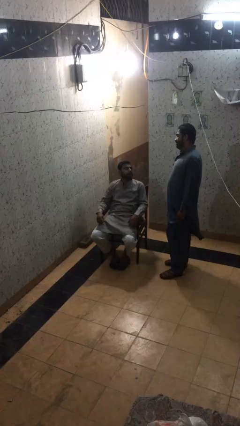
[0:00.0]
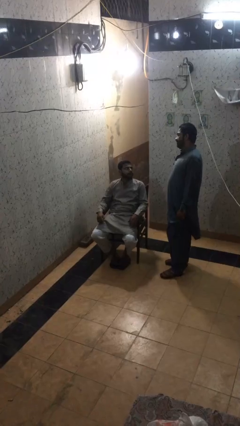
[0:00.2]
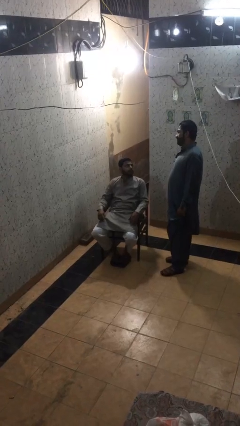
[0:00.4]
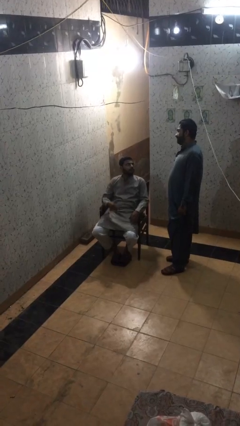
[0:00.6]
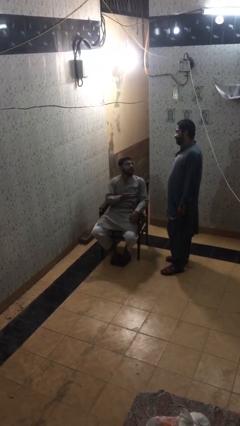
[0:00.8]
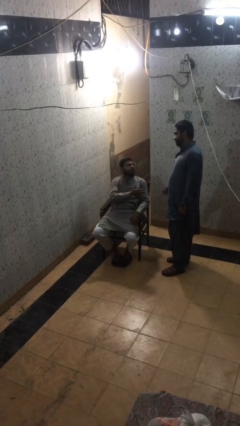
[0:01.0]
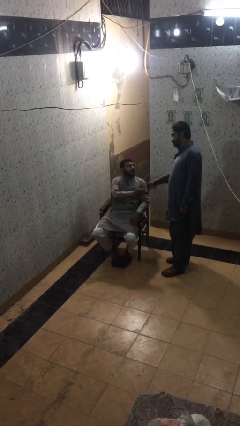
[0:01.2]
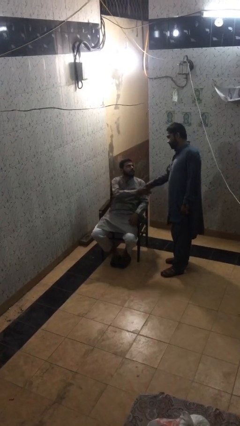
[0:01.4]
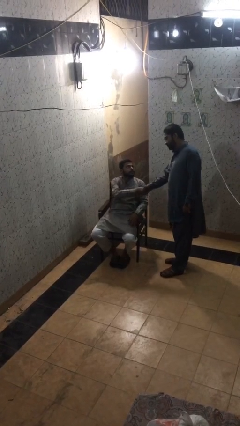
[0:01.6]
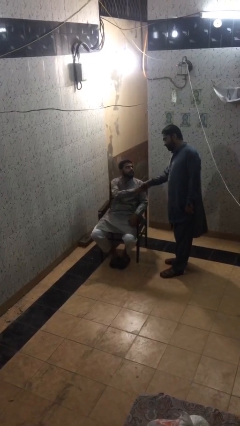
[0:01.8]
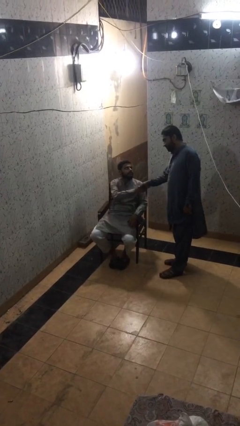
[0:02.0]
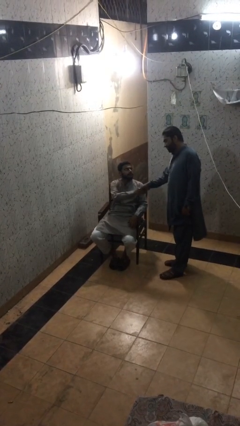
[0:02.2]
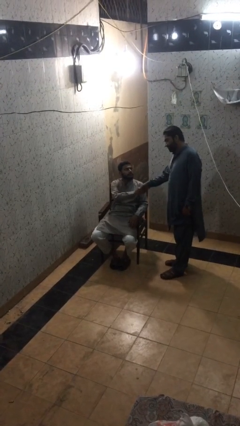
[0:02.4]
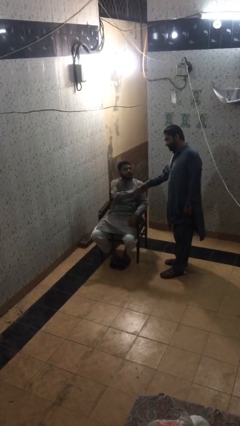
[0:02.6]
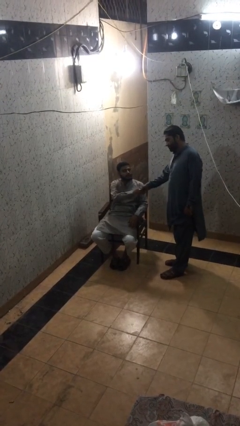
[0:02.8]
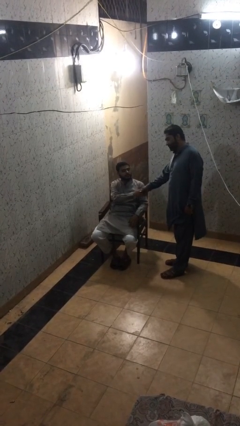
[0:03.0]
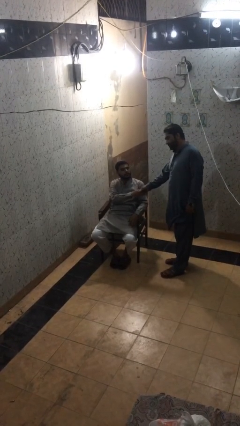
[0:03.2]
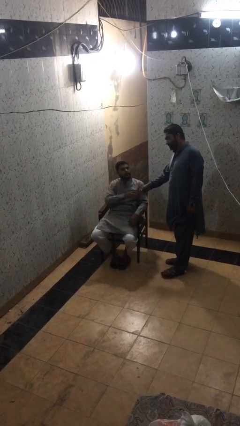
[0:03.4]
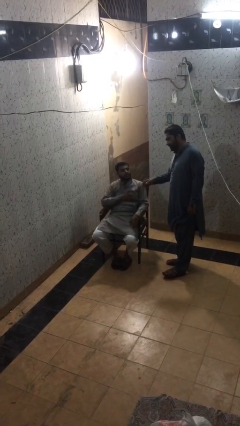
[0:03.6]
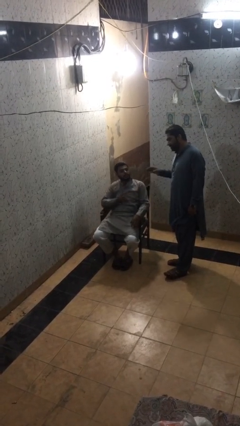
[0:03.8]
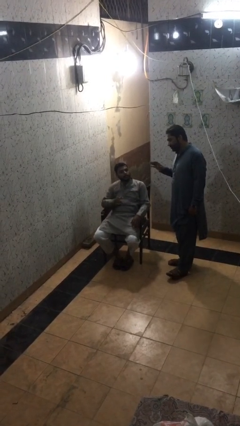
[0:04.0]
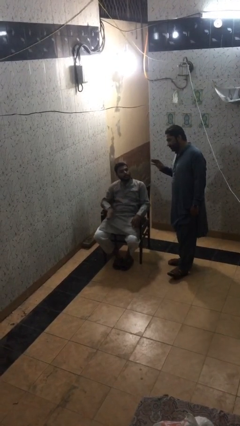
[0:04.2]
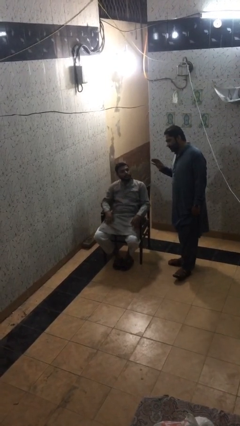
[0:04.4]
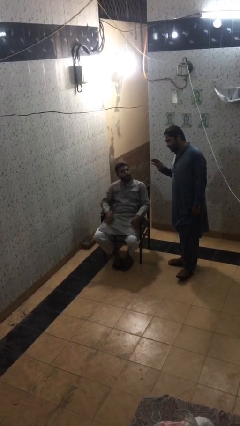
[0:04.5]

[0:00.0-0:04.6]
person shakes hand

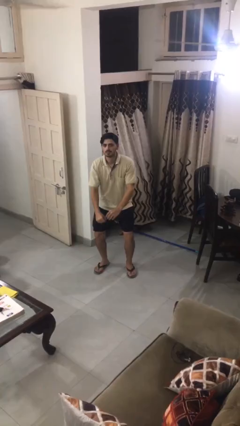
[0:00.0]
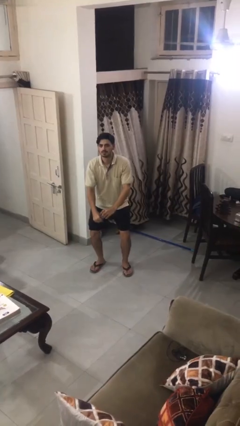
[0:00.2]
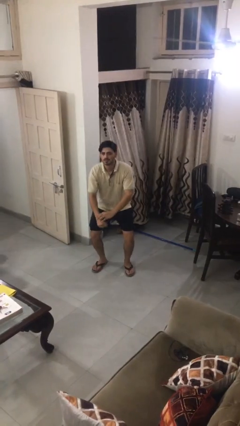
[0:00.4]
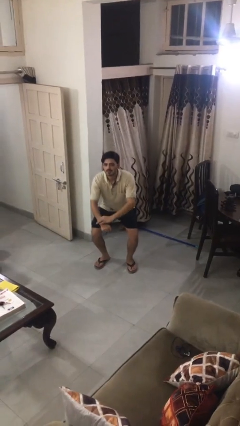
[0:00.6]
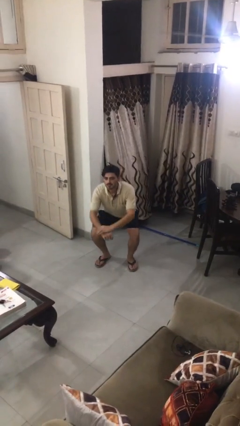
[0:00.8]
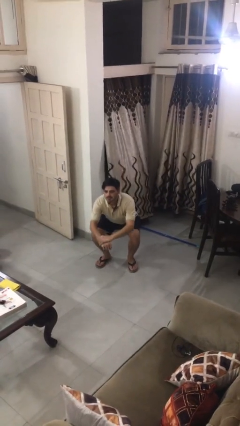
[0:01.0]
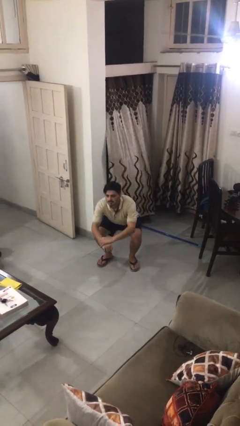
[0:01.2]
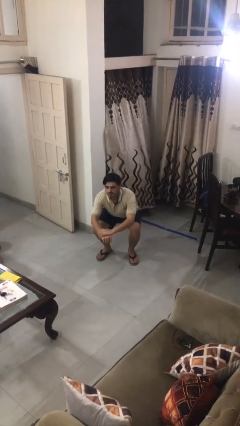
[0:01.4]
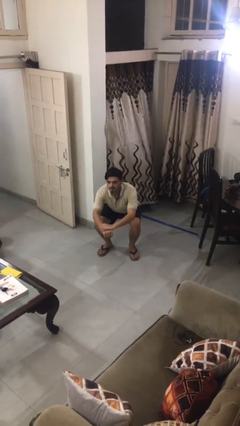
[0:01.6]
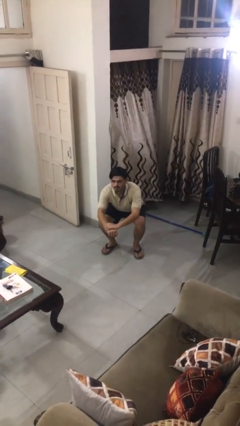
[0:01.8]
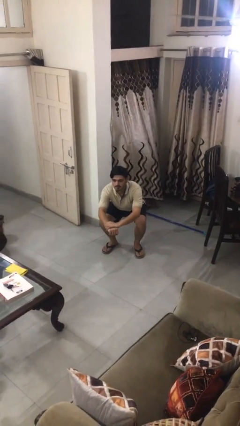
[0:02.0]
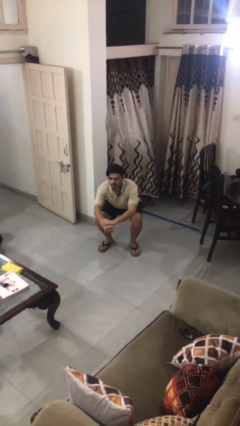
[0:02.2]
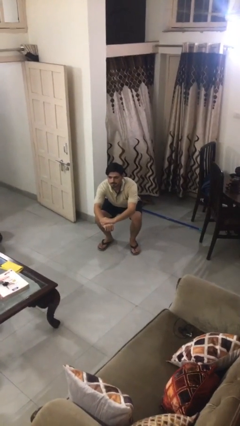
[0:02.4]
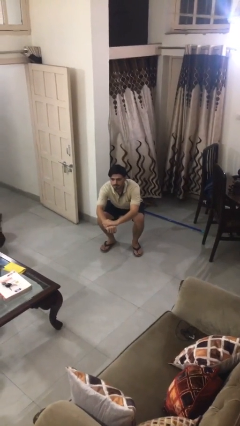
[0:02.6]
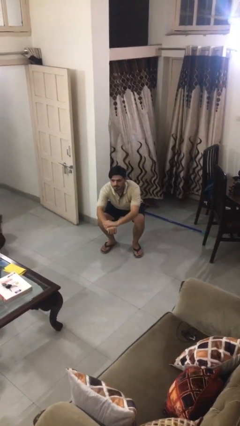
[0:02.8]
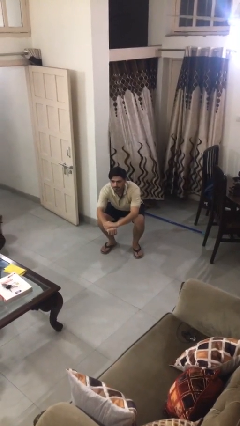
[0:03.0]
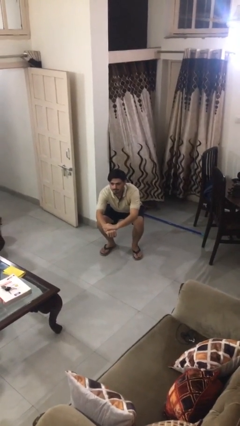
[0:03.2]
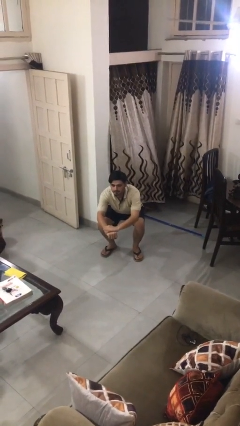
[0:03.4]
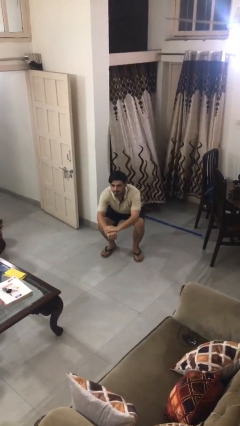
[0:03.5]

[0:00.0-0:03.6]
person squats

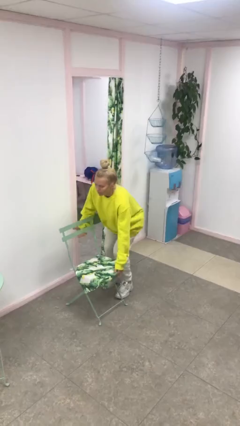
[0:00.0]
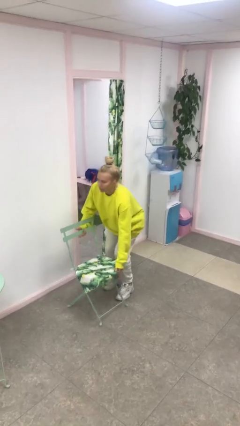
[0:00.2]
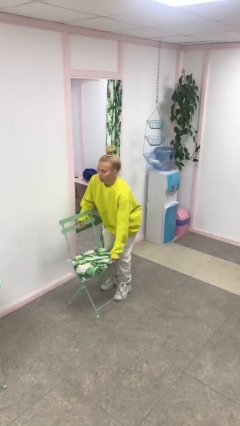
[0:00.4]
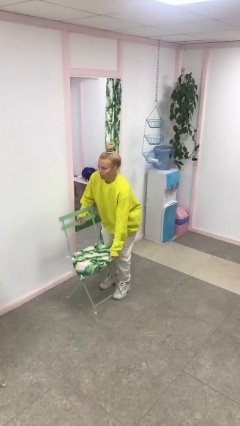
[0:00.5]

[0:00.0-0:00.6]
person picks up object from floor

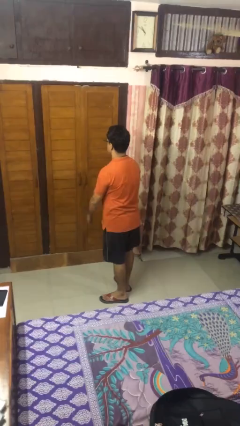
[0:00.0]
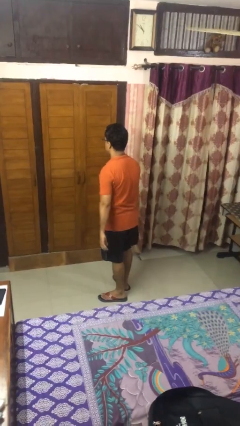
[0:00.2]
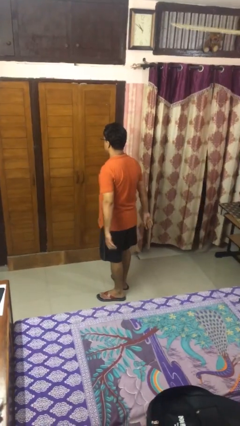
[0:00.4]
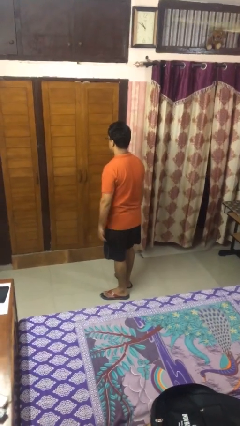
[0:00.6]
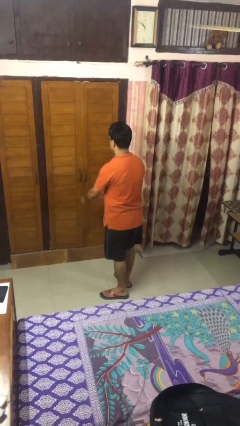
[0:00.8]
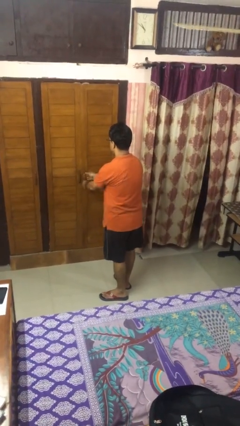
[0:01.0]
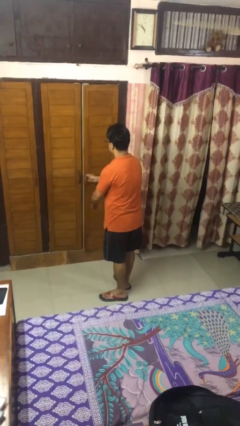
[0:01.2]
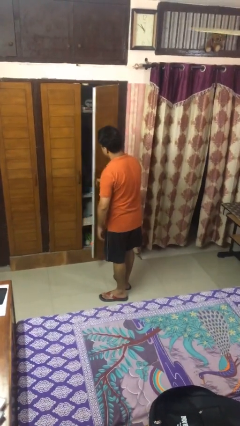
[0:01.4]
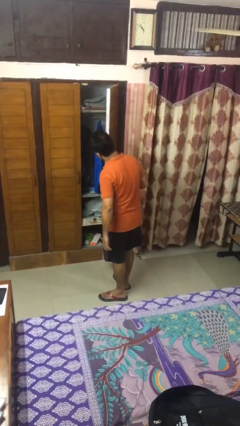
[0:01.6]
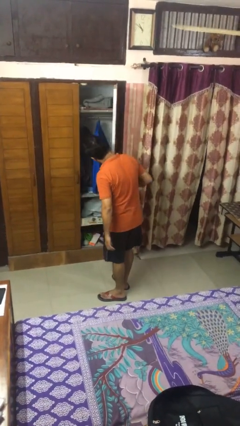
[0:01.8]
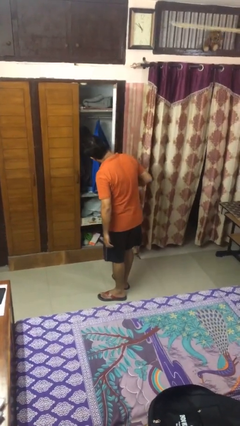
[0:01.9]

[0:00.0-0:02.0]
person opens closet door

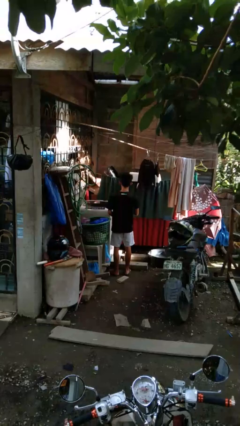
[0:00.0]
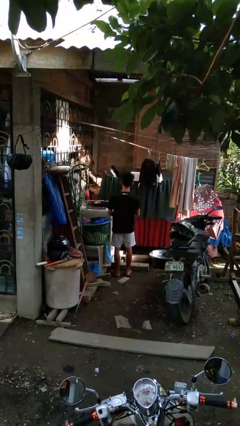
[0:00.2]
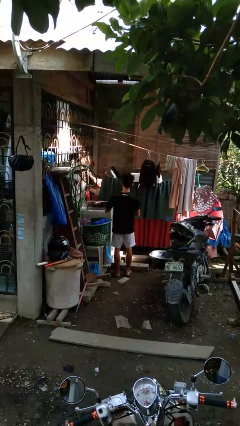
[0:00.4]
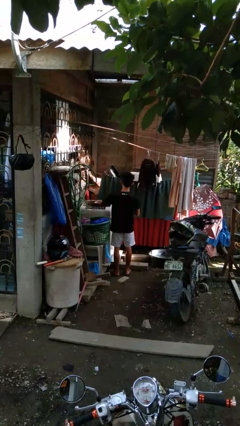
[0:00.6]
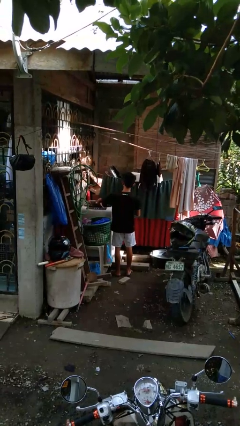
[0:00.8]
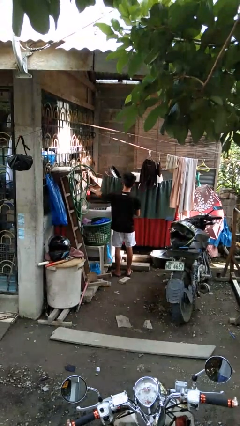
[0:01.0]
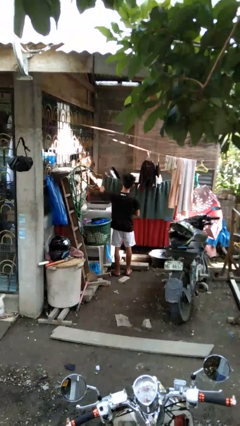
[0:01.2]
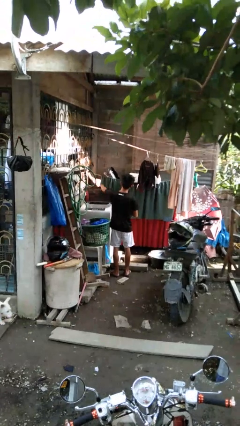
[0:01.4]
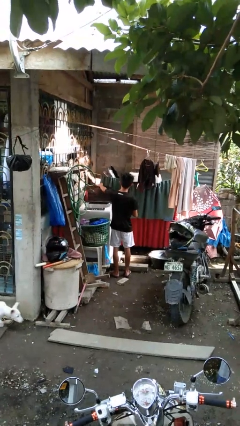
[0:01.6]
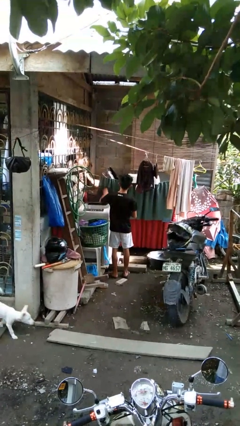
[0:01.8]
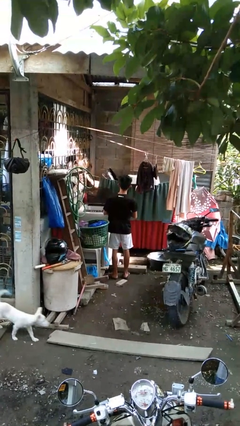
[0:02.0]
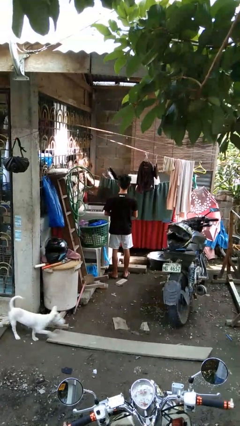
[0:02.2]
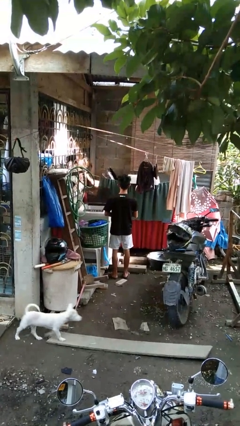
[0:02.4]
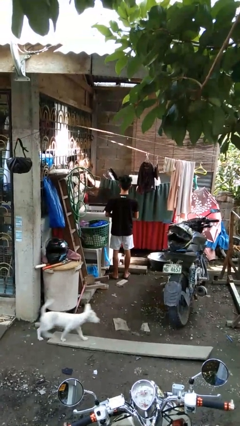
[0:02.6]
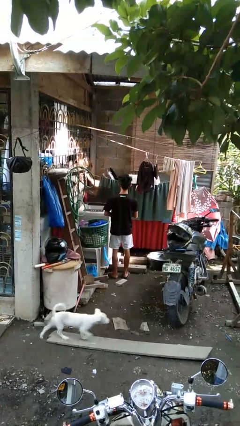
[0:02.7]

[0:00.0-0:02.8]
person opens clothes washer

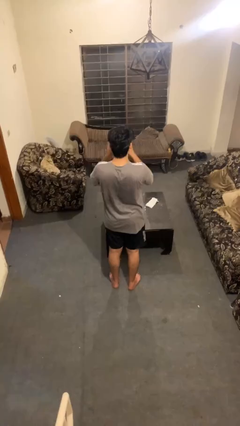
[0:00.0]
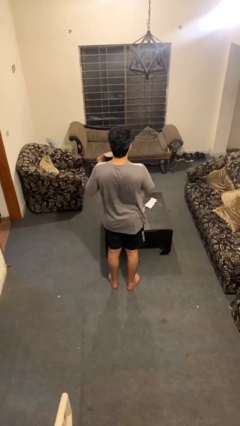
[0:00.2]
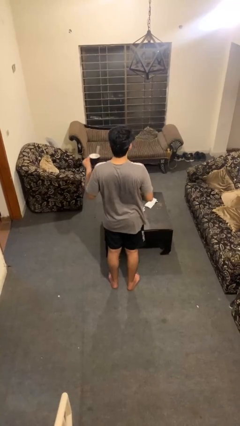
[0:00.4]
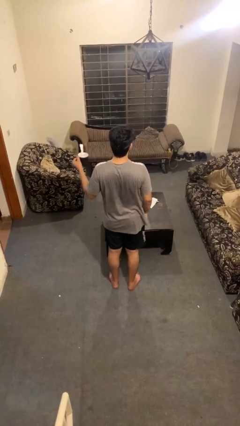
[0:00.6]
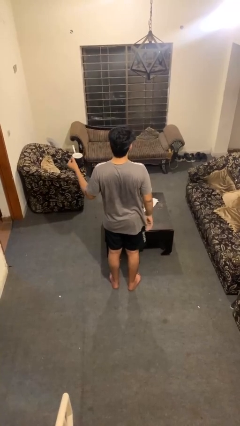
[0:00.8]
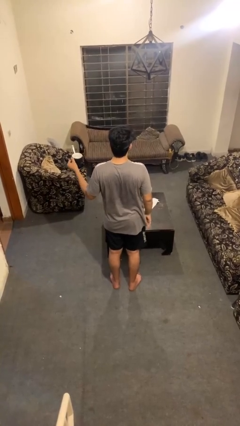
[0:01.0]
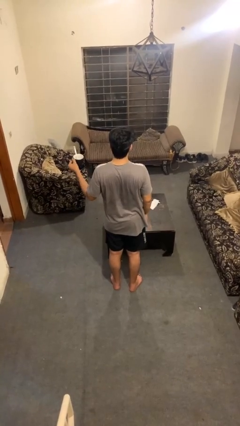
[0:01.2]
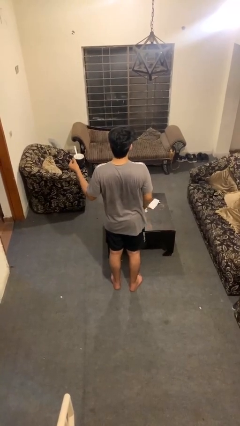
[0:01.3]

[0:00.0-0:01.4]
person drinks from mug

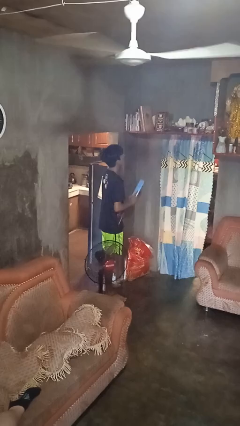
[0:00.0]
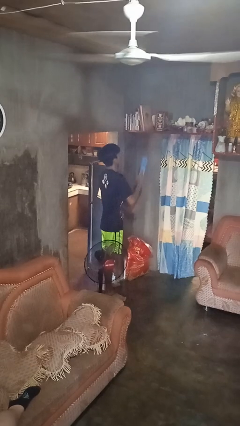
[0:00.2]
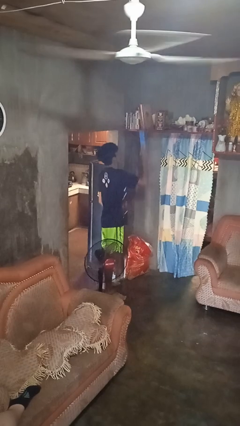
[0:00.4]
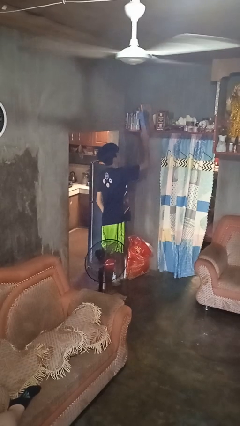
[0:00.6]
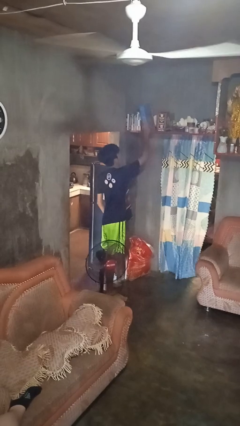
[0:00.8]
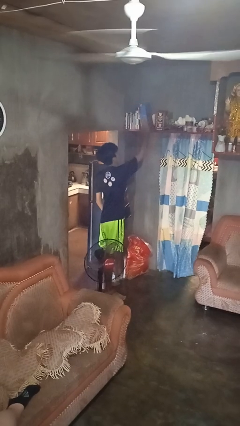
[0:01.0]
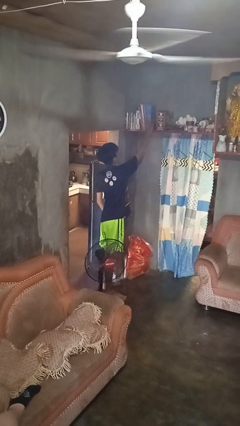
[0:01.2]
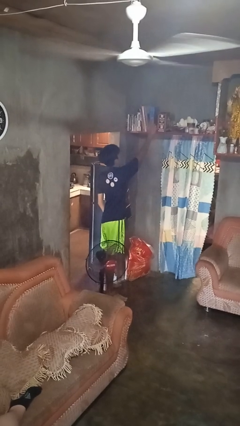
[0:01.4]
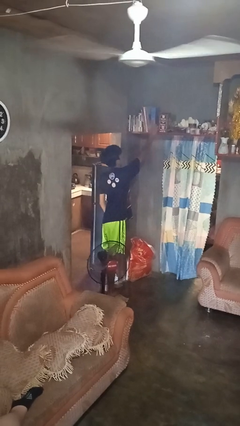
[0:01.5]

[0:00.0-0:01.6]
person puts down object on shelf

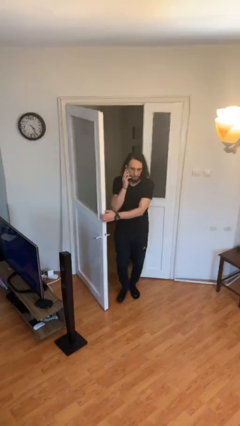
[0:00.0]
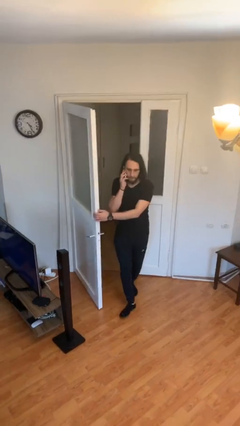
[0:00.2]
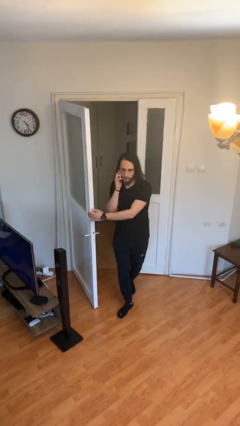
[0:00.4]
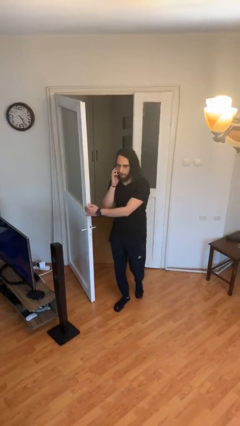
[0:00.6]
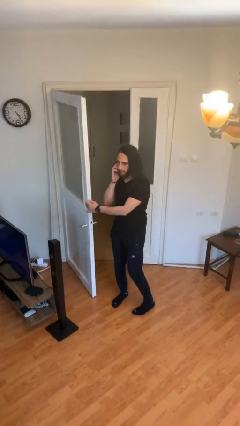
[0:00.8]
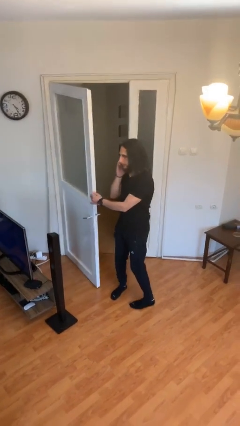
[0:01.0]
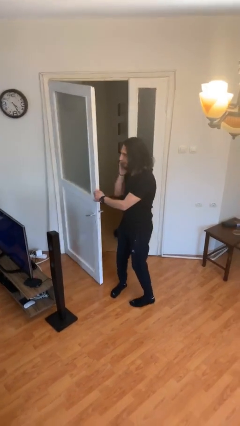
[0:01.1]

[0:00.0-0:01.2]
person enters scene through structure
